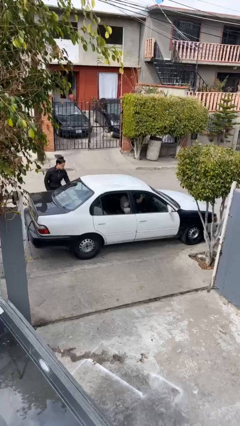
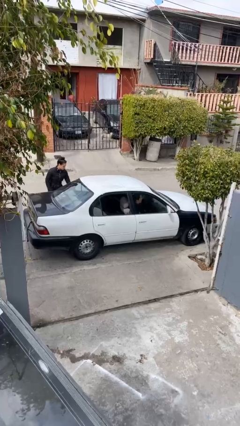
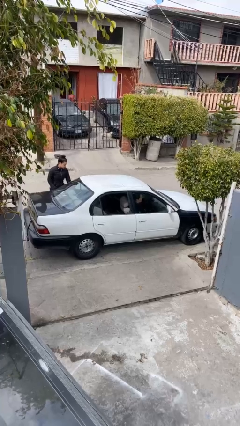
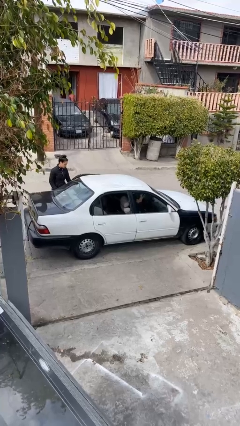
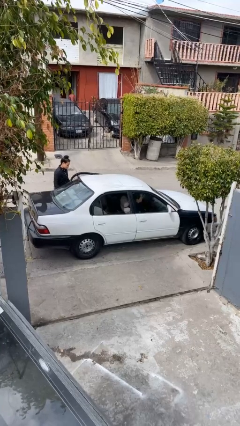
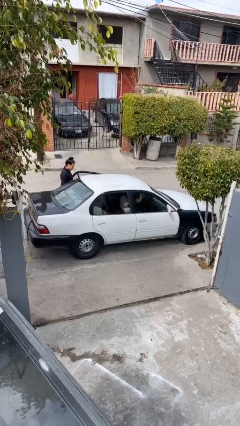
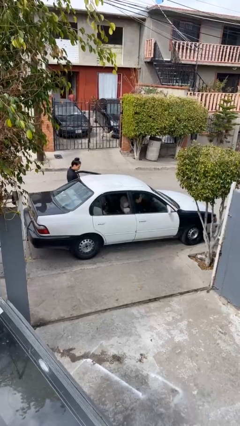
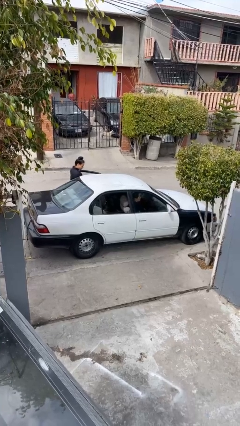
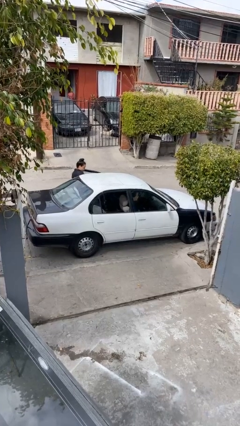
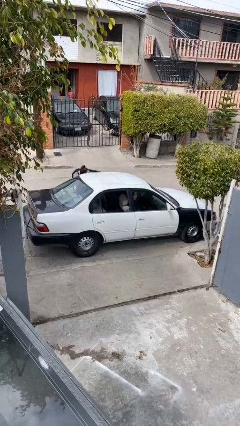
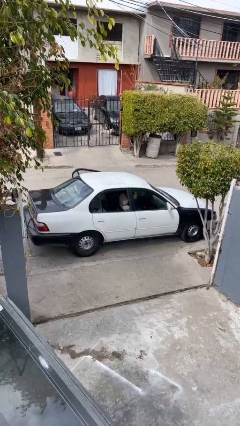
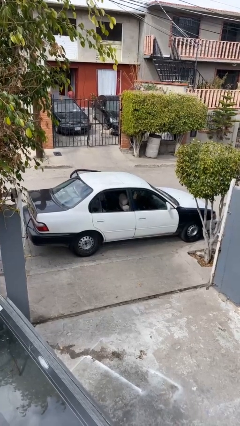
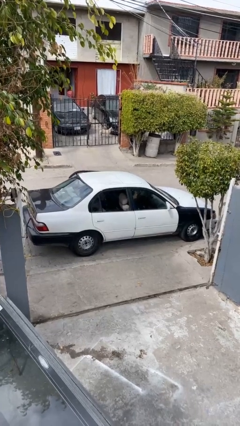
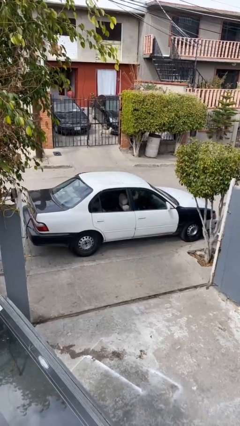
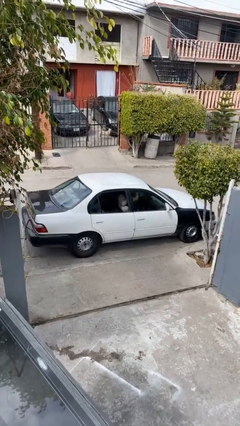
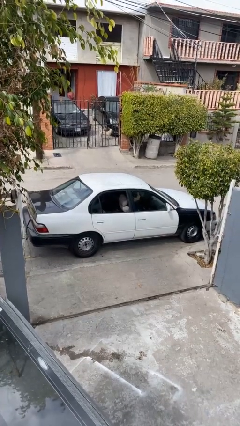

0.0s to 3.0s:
car picks up person

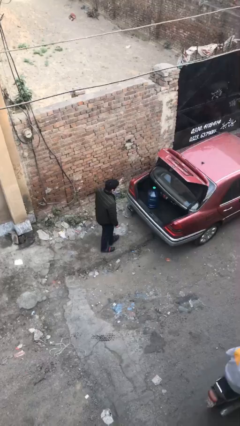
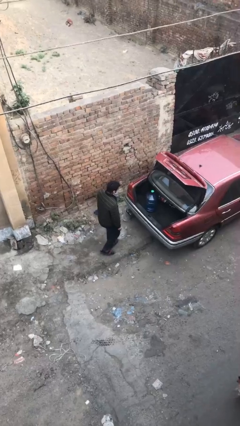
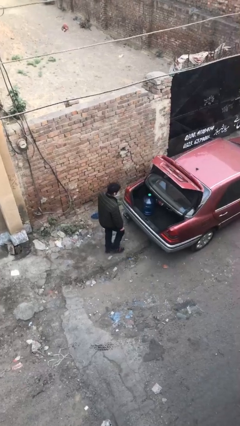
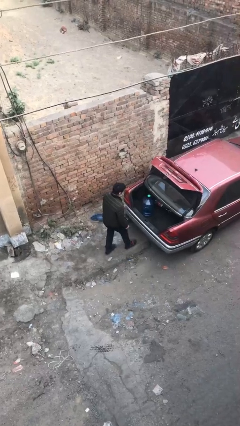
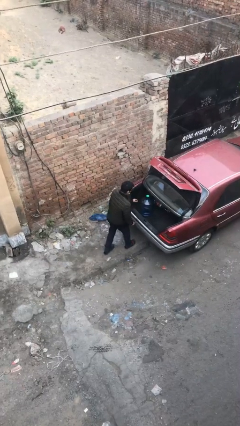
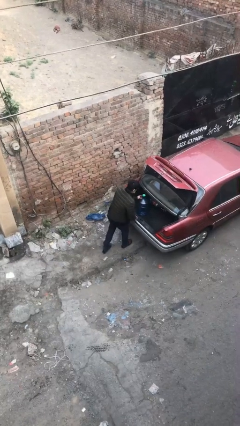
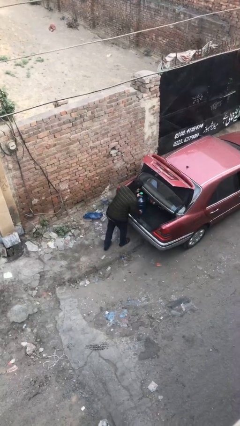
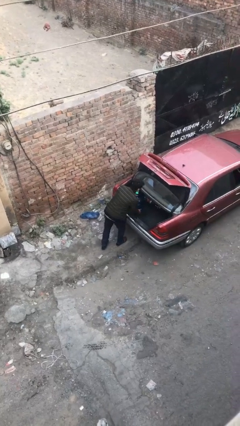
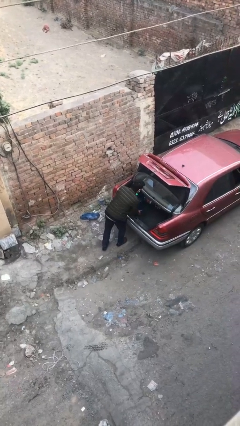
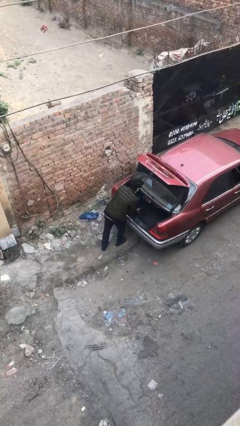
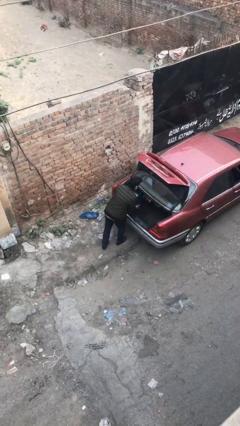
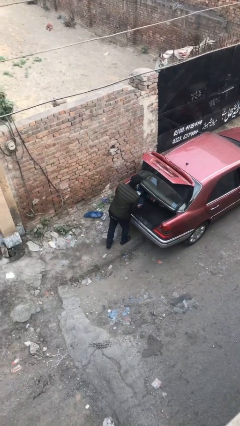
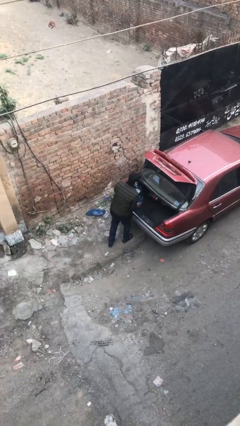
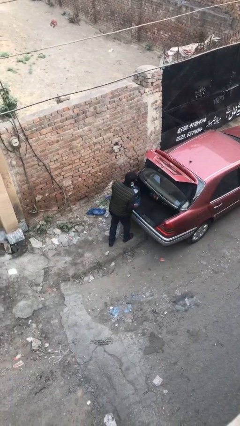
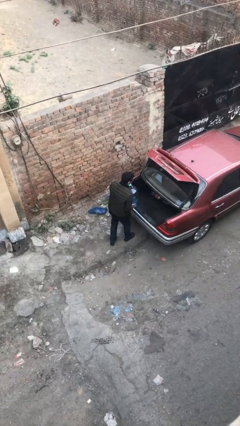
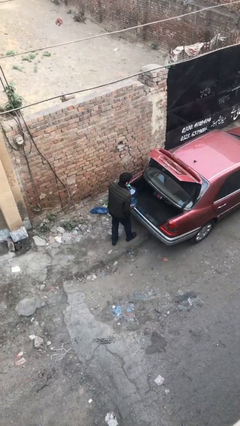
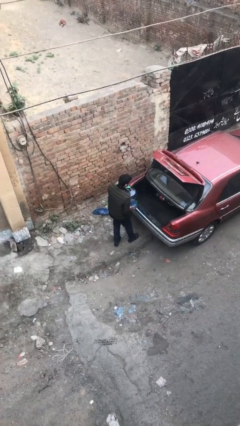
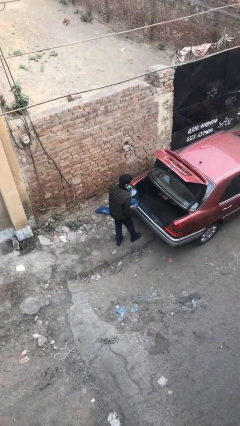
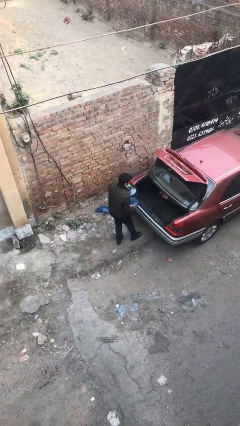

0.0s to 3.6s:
person unloads car

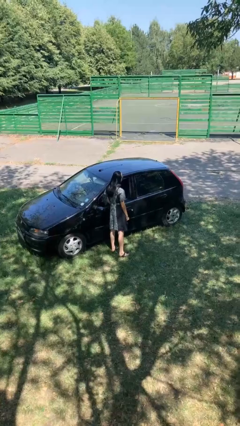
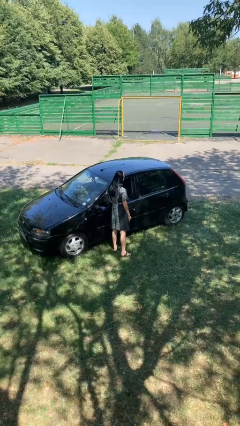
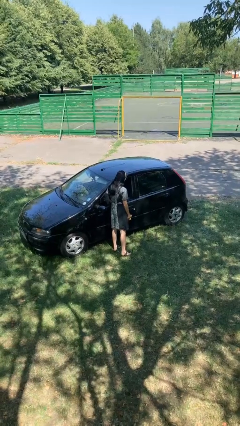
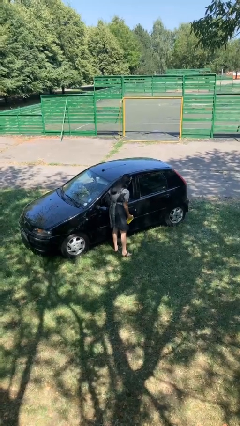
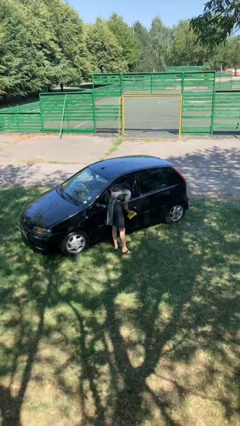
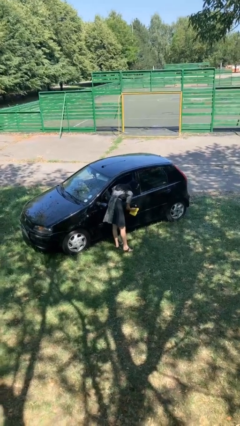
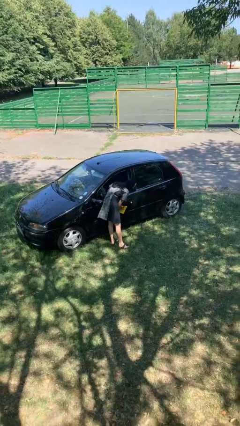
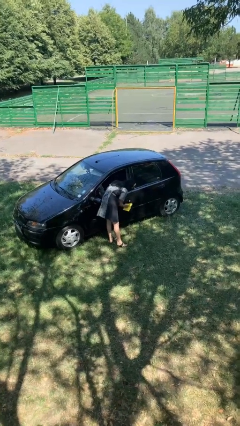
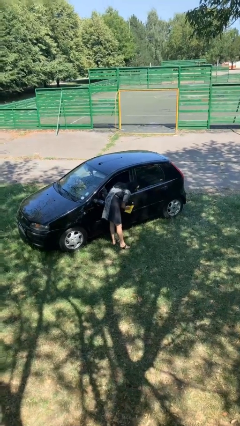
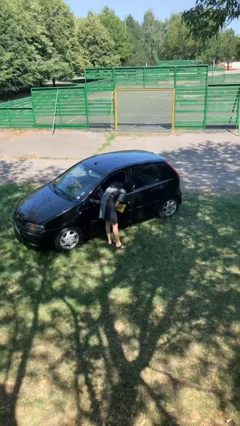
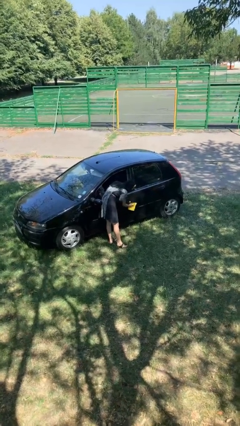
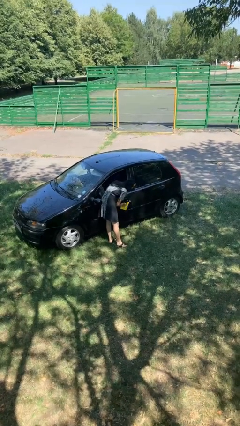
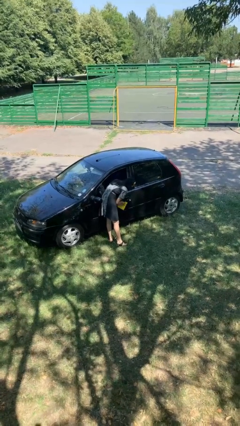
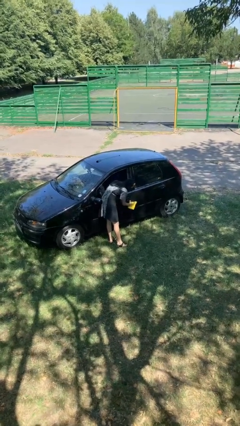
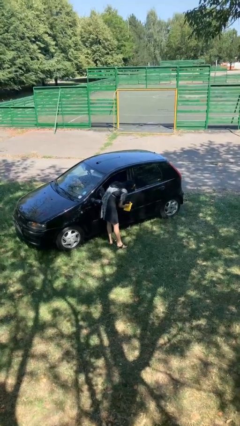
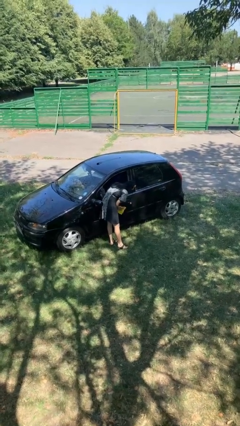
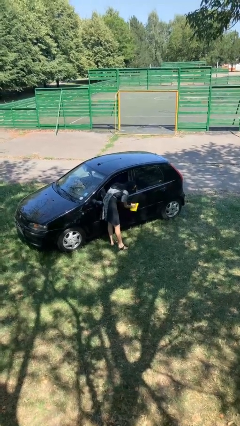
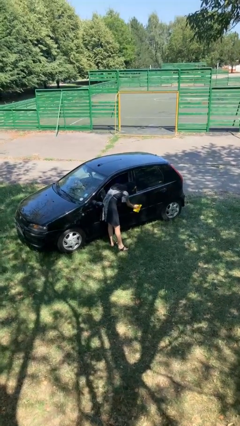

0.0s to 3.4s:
person polishes car with rag

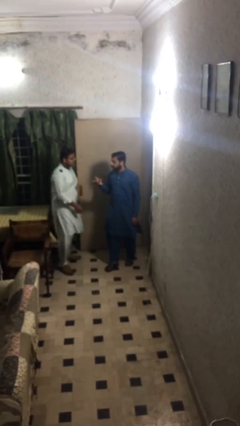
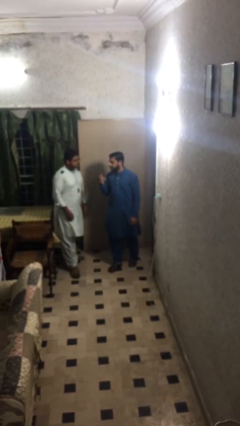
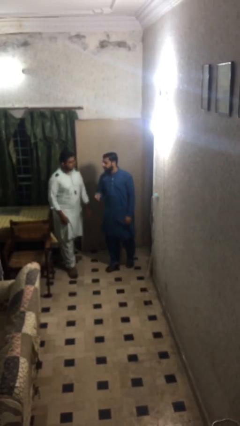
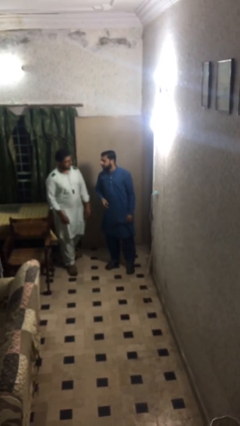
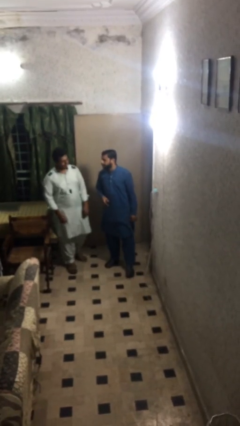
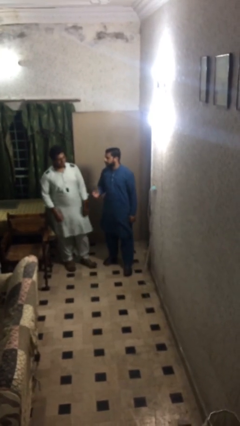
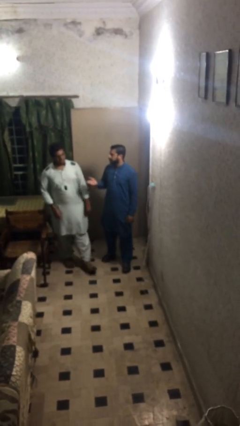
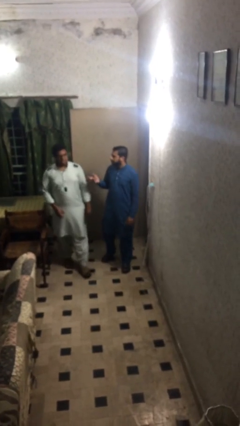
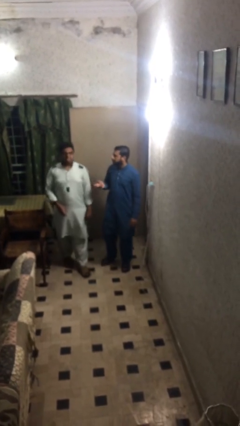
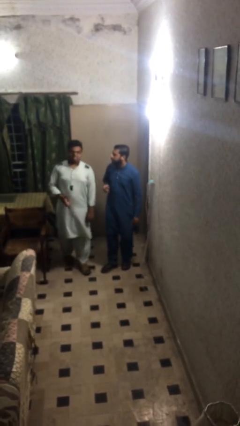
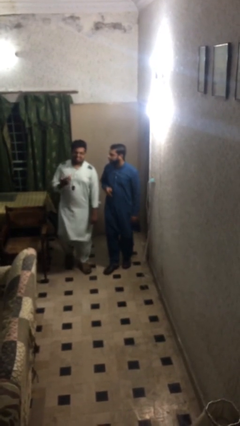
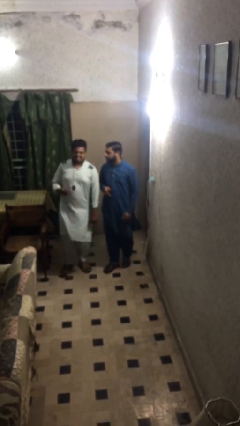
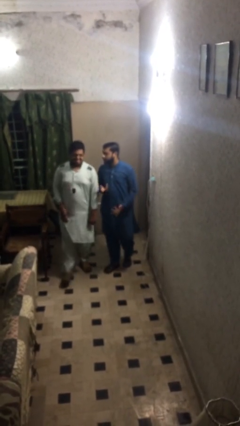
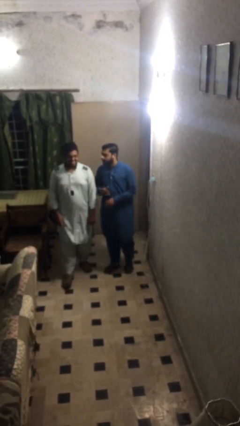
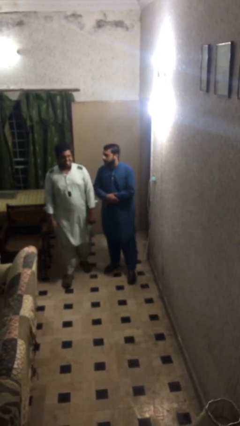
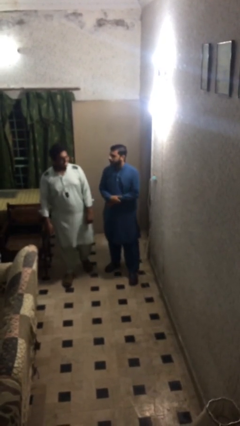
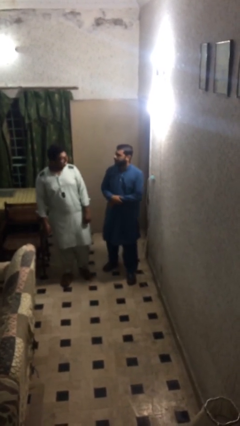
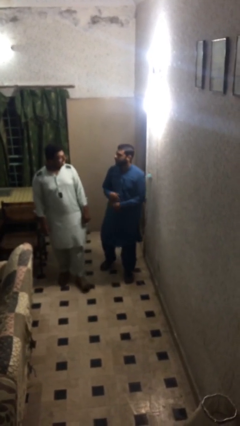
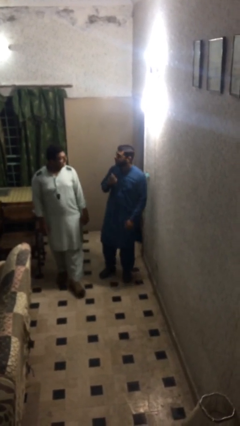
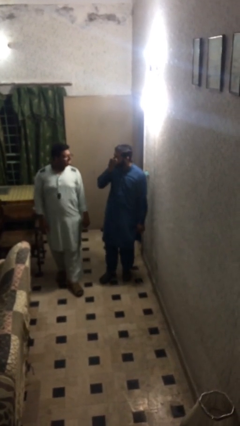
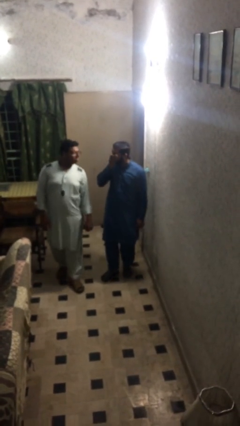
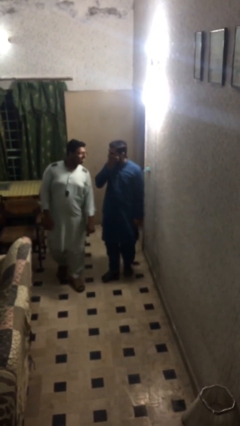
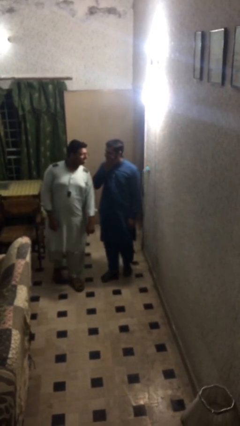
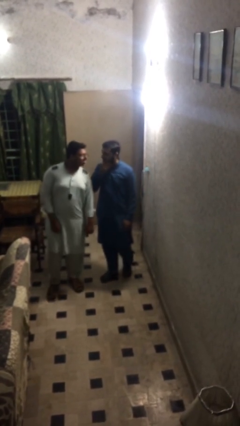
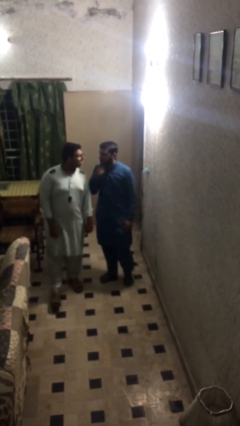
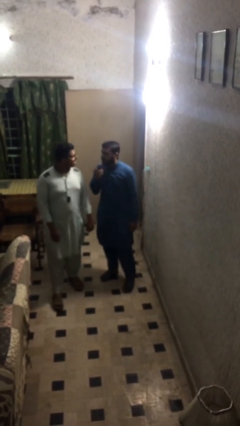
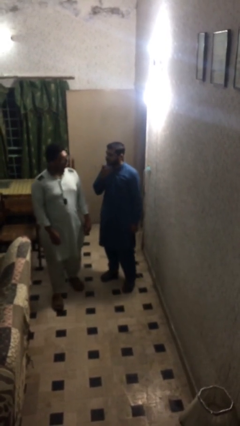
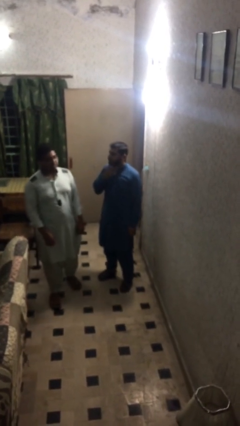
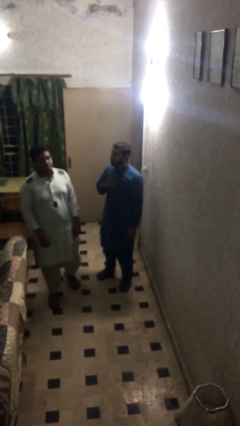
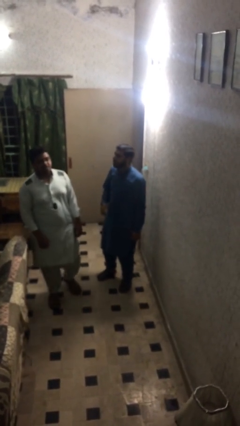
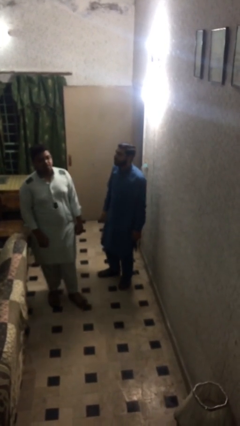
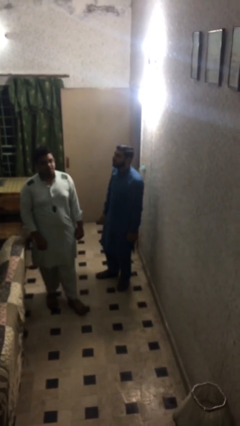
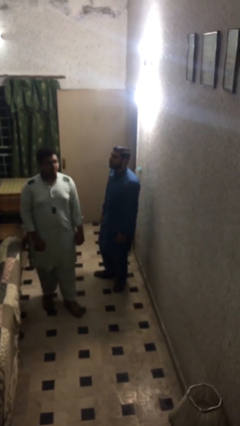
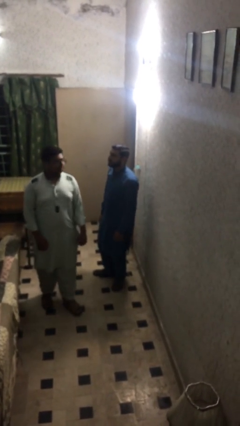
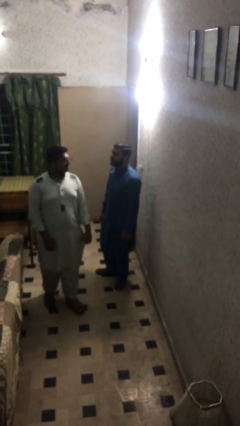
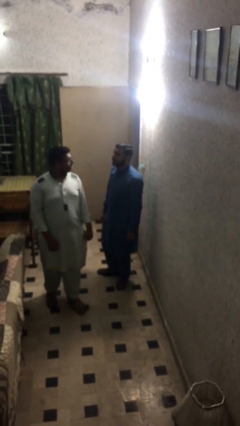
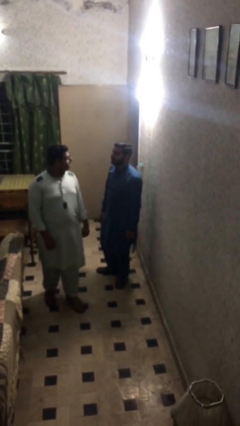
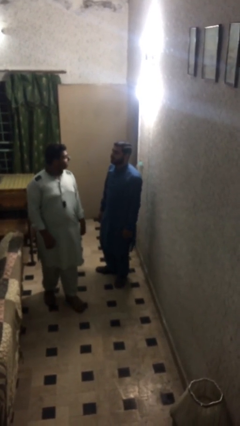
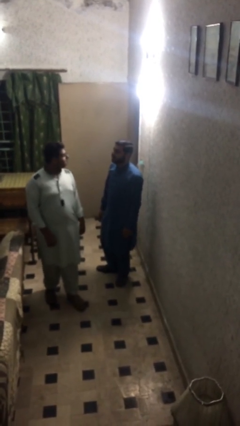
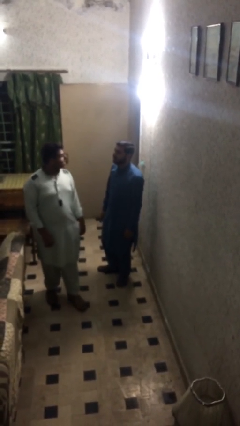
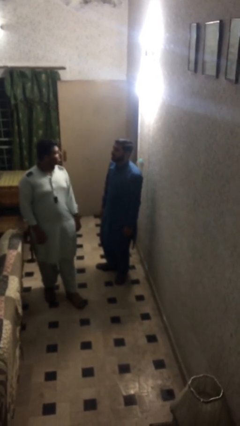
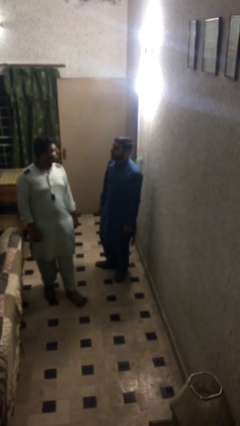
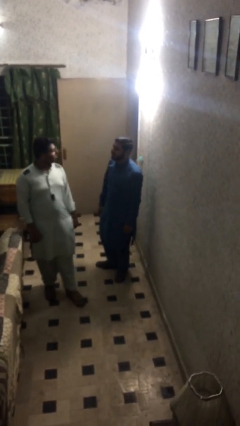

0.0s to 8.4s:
person talks to person
